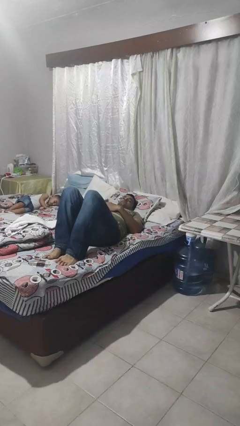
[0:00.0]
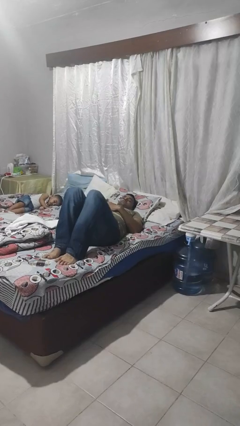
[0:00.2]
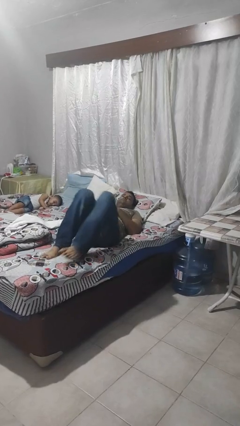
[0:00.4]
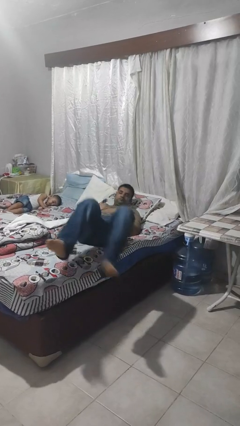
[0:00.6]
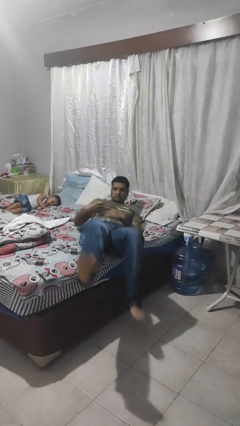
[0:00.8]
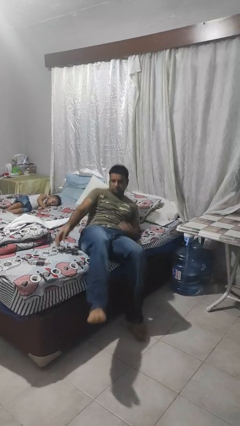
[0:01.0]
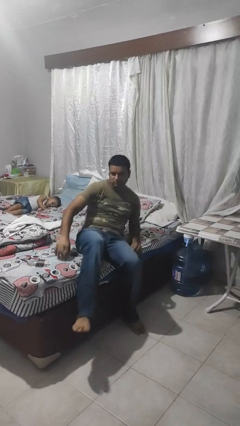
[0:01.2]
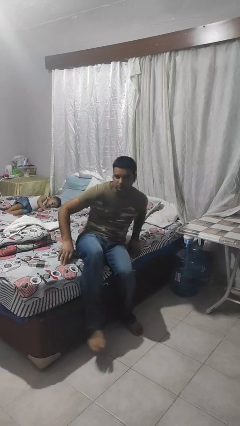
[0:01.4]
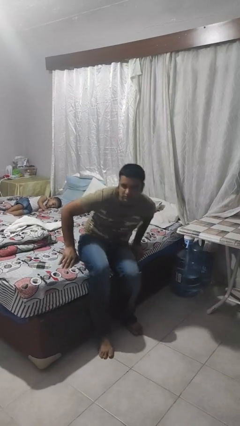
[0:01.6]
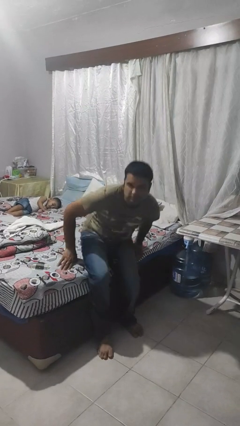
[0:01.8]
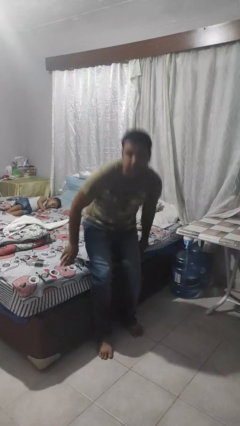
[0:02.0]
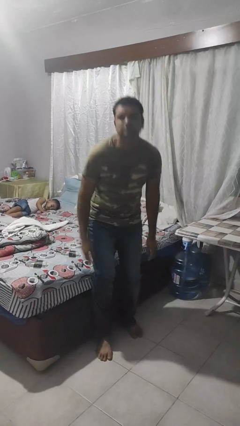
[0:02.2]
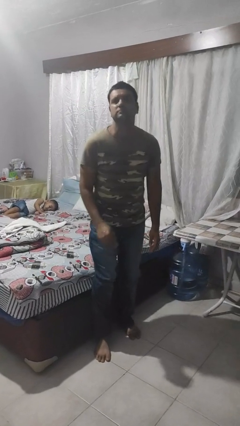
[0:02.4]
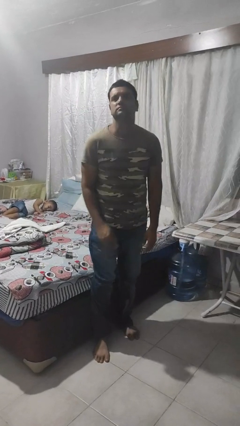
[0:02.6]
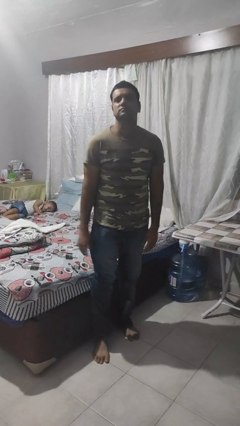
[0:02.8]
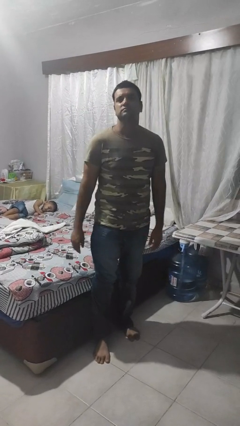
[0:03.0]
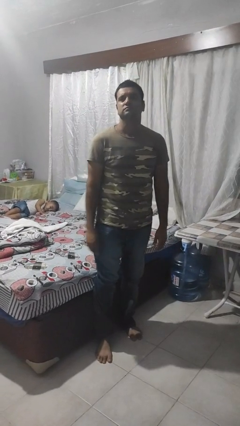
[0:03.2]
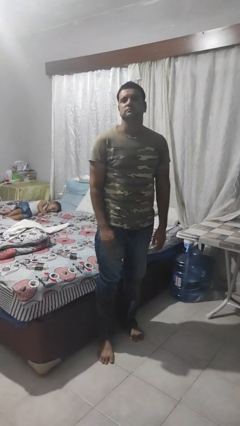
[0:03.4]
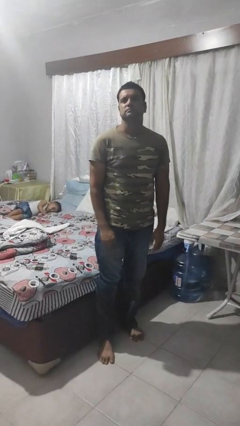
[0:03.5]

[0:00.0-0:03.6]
person stands up

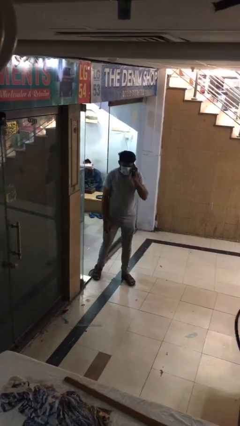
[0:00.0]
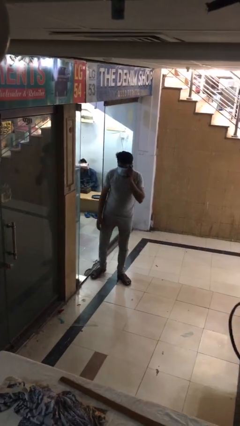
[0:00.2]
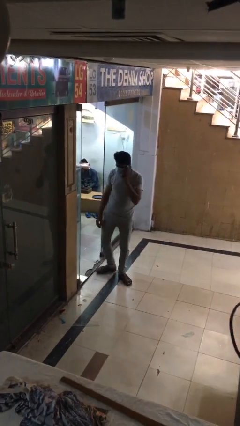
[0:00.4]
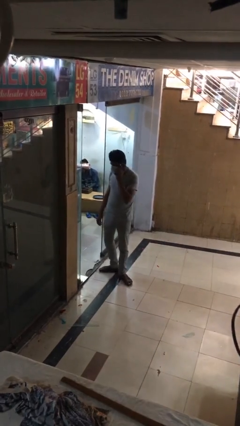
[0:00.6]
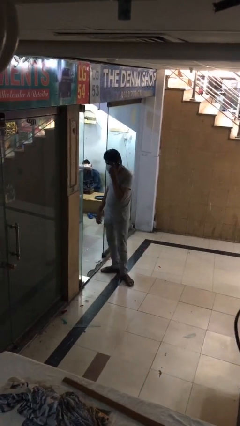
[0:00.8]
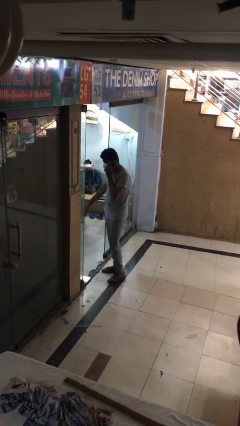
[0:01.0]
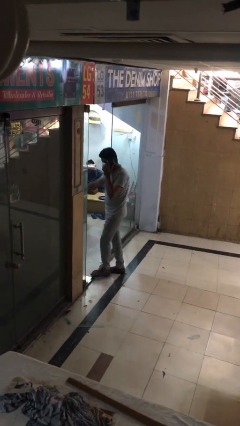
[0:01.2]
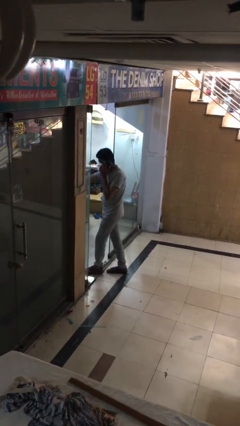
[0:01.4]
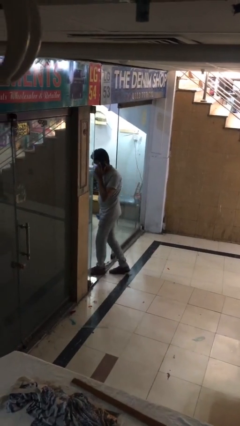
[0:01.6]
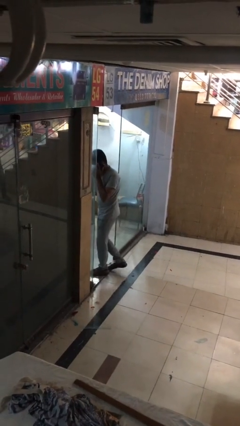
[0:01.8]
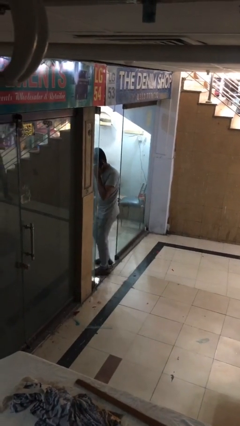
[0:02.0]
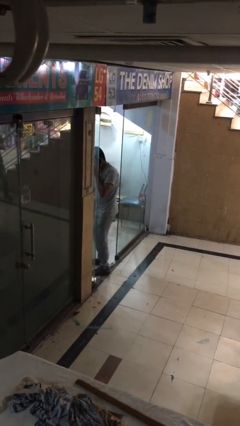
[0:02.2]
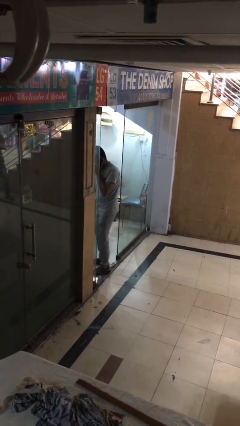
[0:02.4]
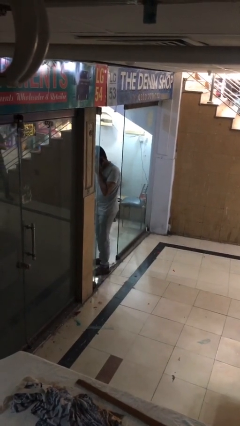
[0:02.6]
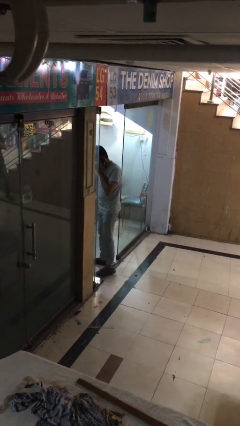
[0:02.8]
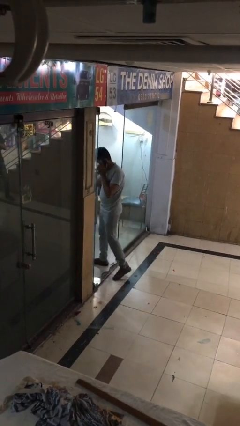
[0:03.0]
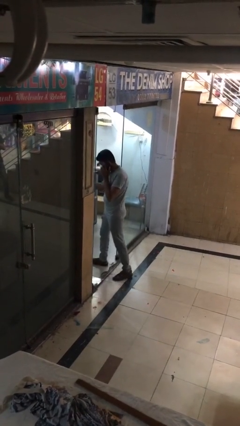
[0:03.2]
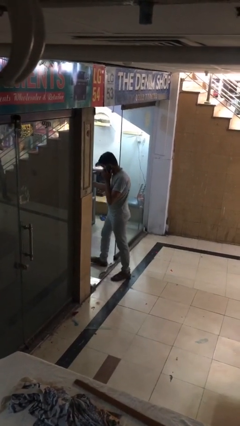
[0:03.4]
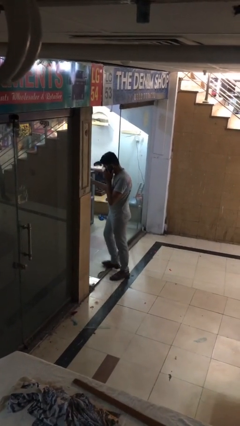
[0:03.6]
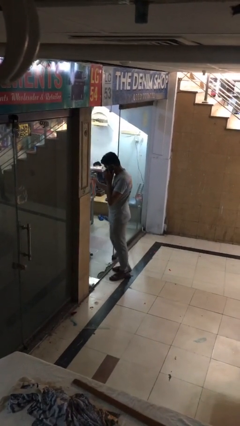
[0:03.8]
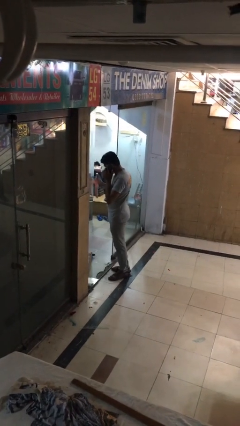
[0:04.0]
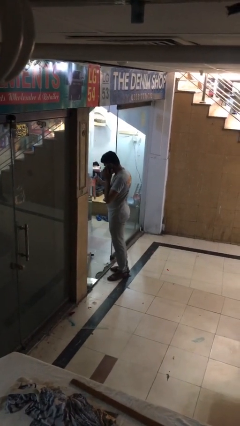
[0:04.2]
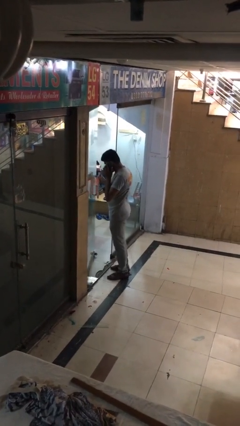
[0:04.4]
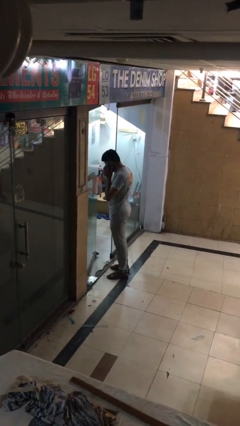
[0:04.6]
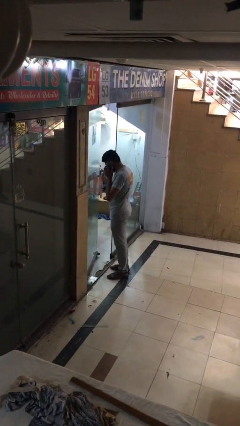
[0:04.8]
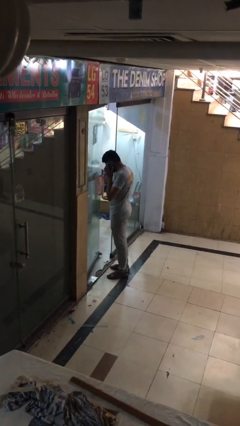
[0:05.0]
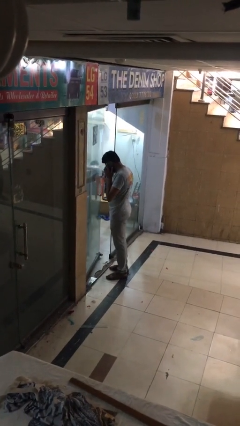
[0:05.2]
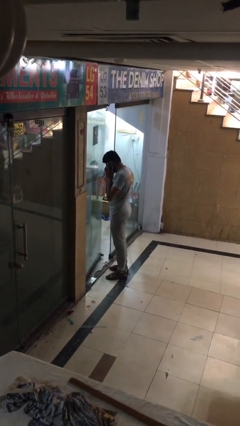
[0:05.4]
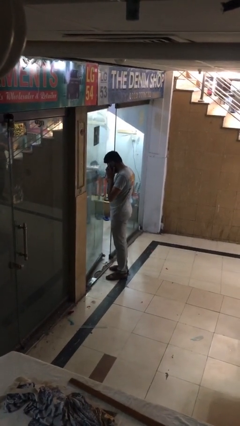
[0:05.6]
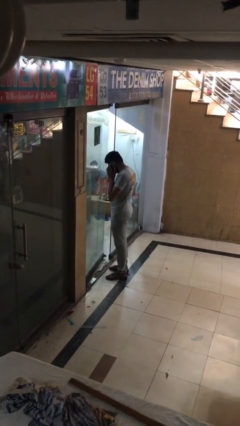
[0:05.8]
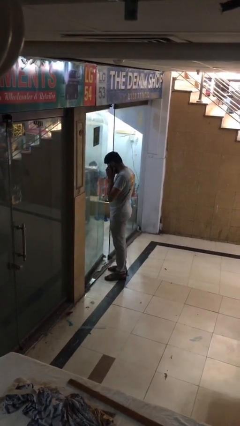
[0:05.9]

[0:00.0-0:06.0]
person closes facility door

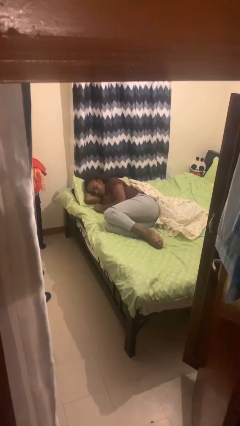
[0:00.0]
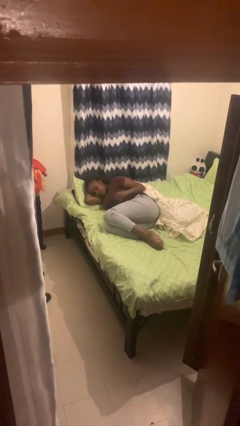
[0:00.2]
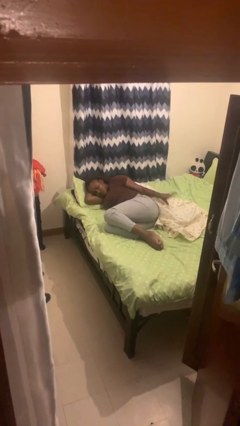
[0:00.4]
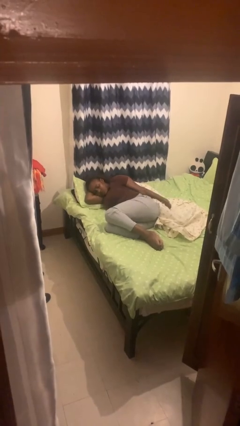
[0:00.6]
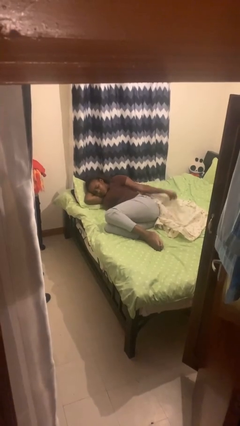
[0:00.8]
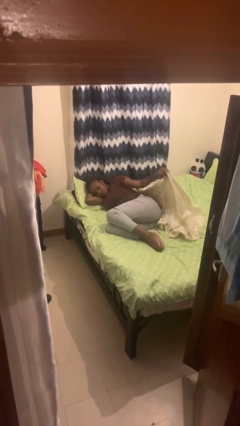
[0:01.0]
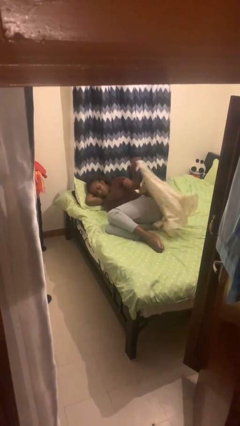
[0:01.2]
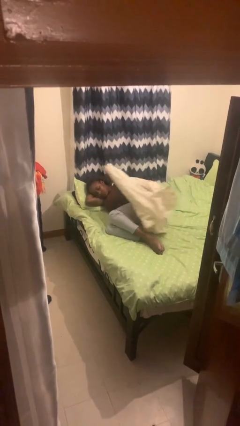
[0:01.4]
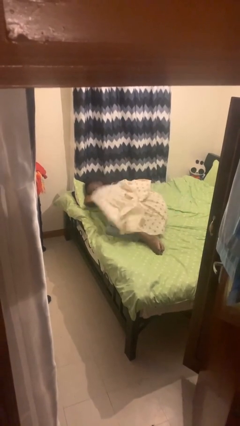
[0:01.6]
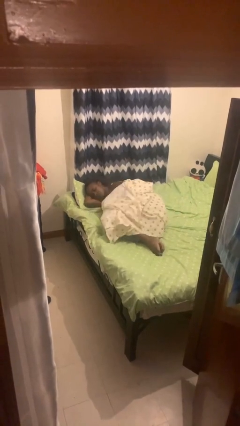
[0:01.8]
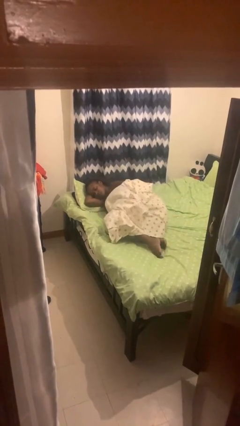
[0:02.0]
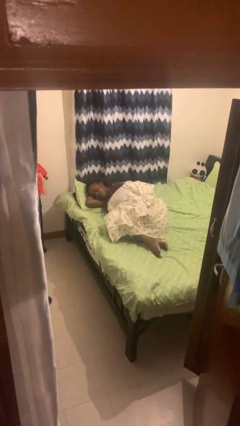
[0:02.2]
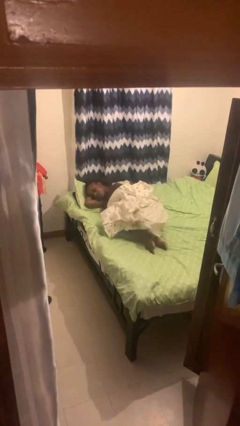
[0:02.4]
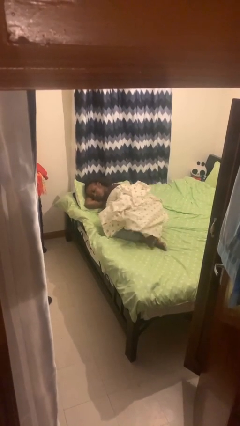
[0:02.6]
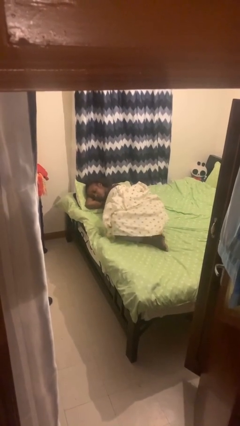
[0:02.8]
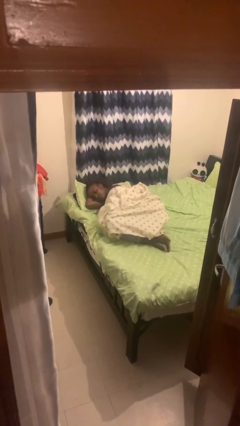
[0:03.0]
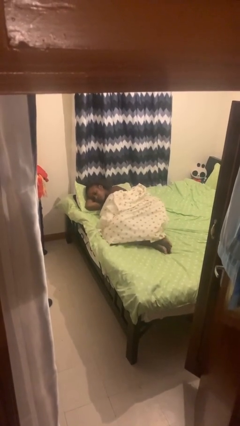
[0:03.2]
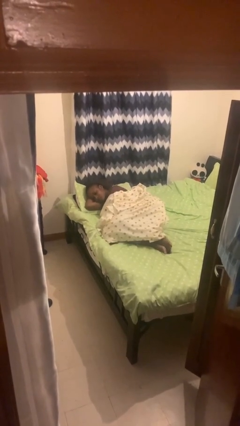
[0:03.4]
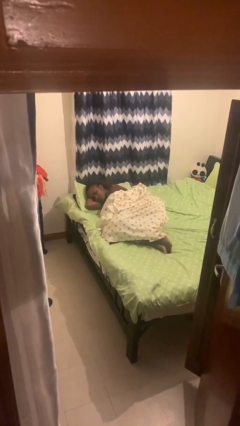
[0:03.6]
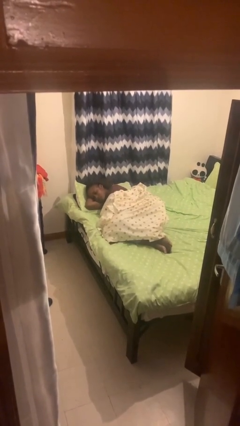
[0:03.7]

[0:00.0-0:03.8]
person covers with bedsheets

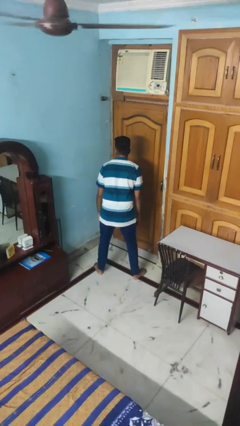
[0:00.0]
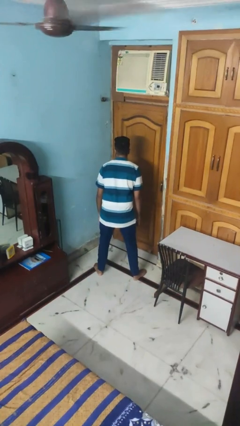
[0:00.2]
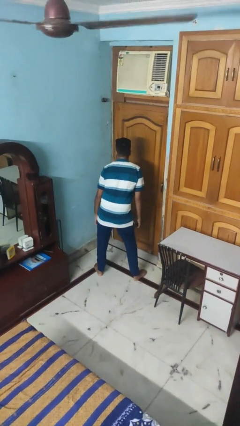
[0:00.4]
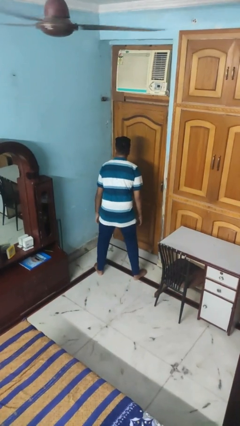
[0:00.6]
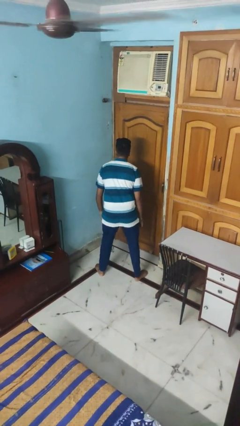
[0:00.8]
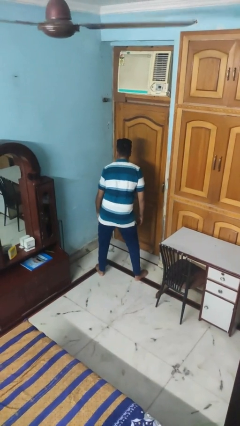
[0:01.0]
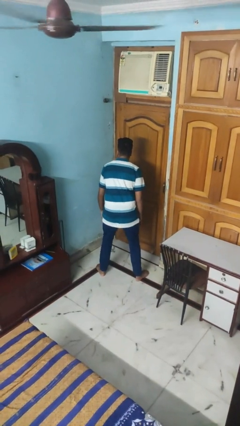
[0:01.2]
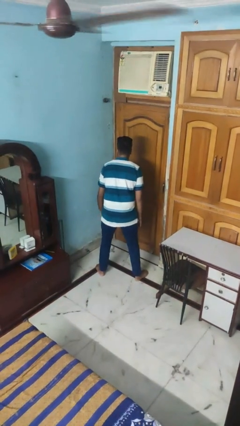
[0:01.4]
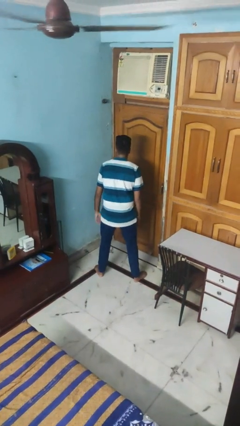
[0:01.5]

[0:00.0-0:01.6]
person wiggles hips

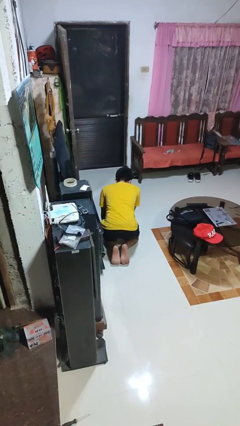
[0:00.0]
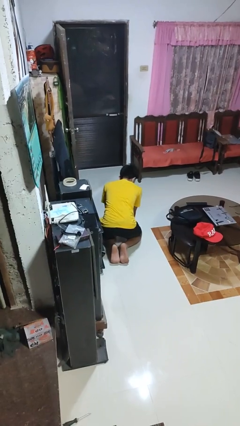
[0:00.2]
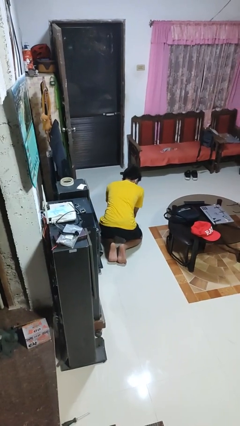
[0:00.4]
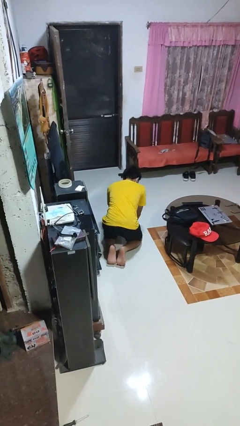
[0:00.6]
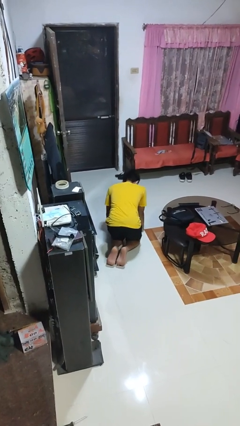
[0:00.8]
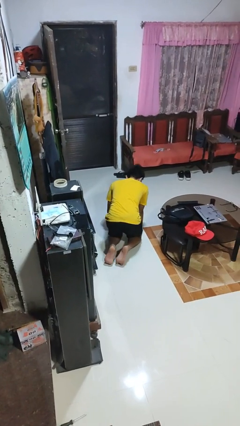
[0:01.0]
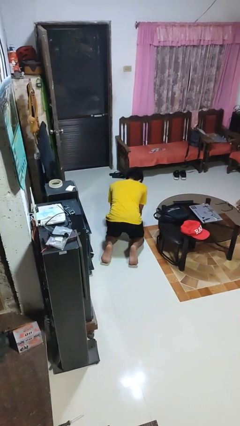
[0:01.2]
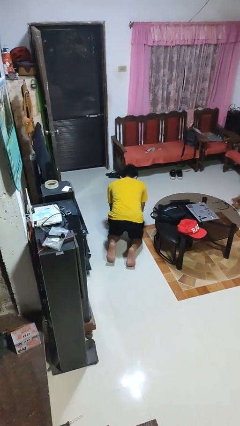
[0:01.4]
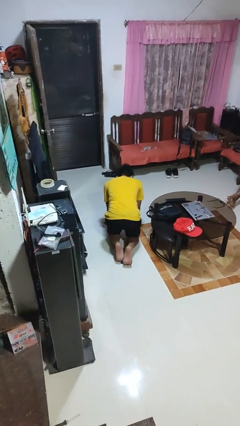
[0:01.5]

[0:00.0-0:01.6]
person crawls

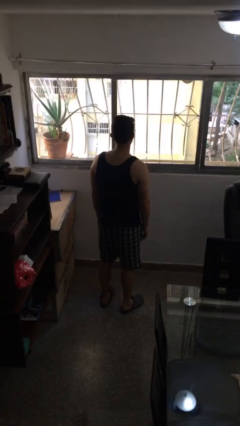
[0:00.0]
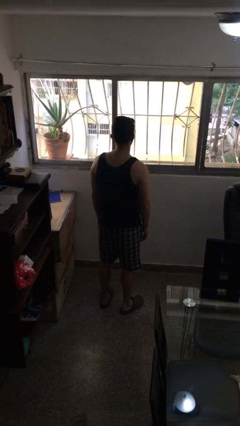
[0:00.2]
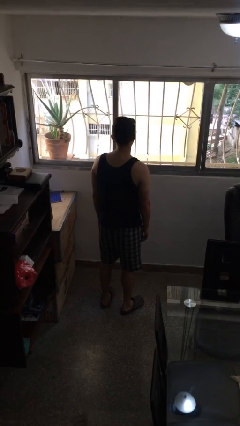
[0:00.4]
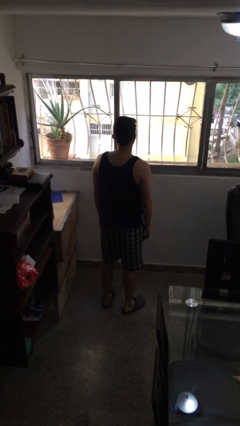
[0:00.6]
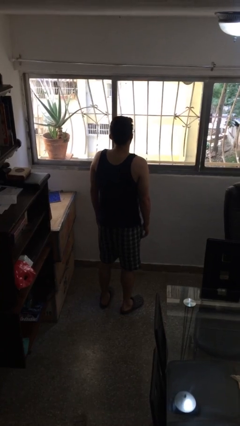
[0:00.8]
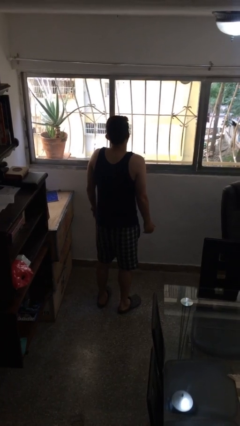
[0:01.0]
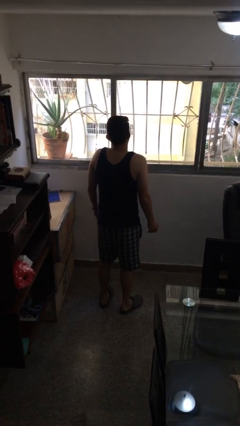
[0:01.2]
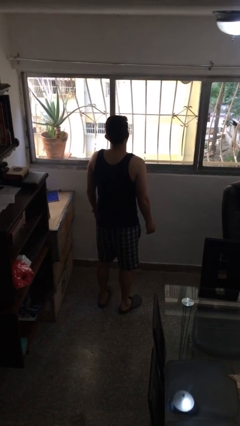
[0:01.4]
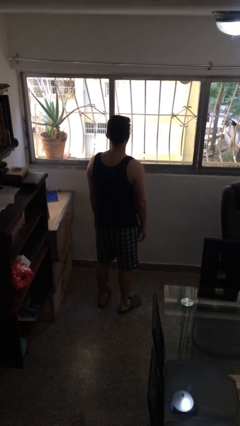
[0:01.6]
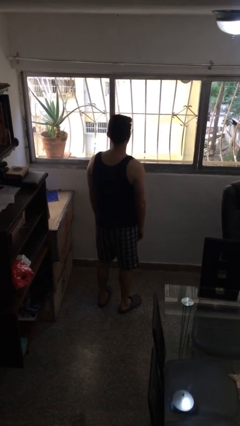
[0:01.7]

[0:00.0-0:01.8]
person shrugs
